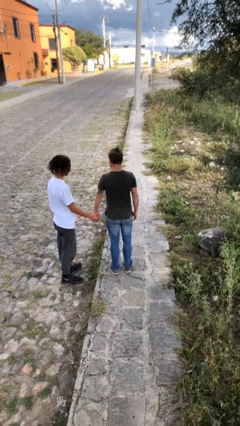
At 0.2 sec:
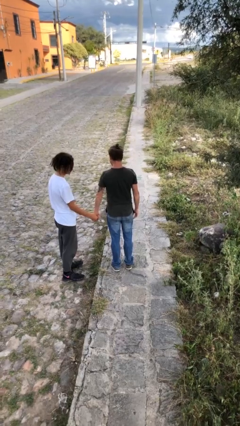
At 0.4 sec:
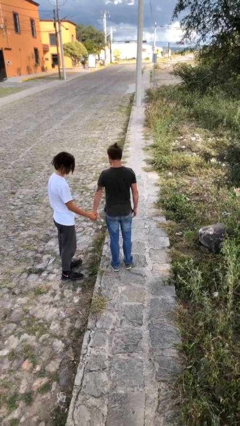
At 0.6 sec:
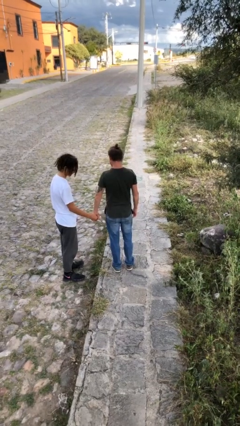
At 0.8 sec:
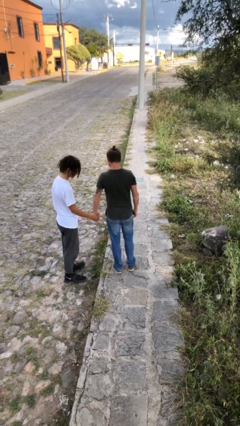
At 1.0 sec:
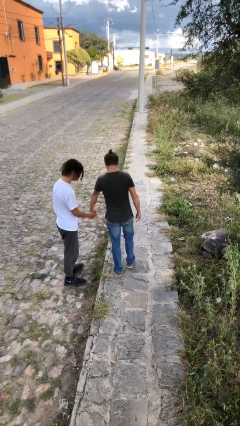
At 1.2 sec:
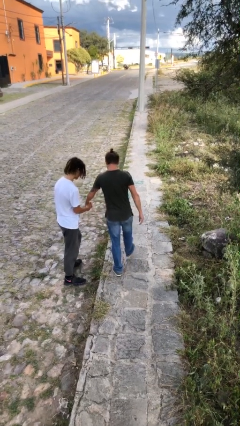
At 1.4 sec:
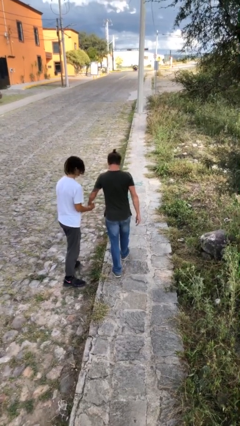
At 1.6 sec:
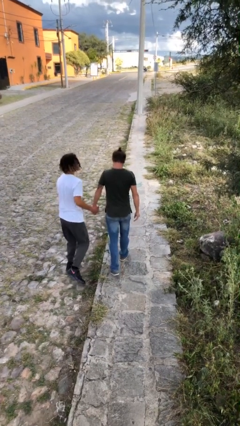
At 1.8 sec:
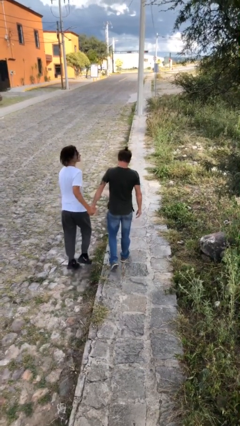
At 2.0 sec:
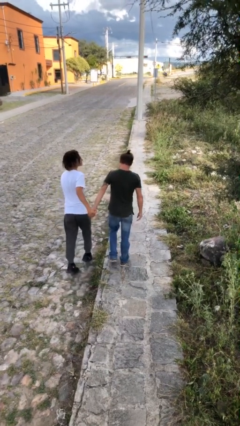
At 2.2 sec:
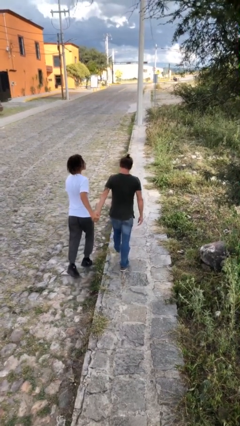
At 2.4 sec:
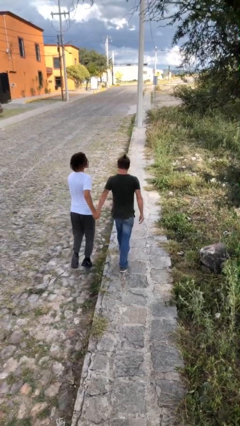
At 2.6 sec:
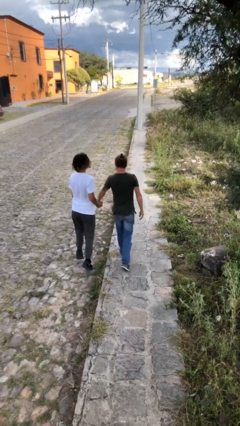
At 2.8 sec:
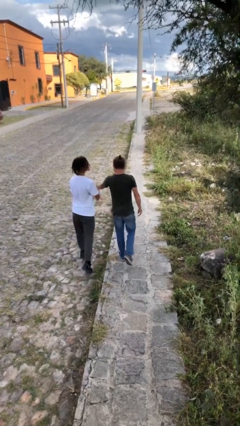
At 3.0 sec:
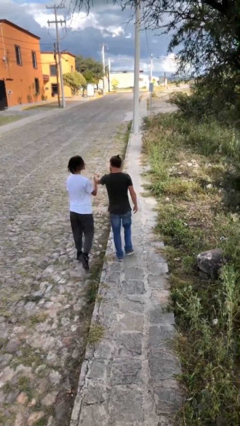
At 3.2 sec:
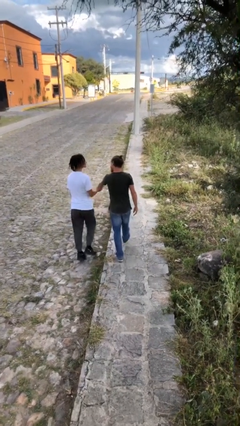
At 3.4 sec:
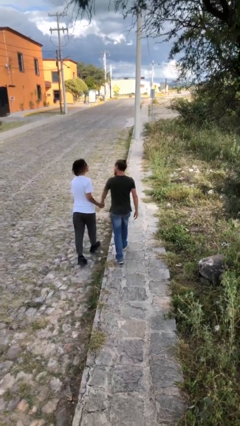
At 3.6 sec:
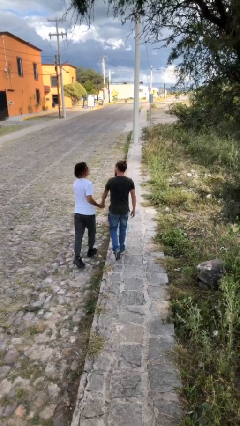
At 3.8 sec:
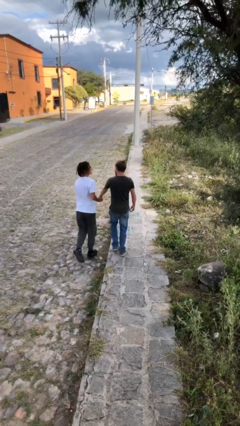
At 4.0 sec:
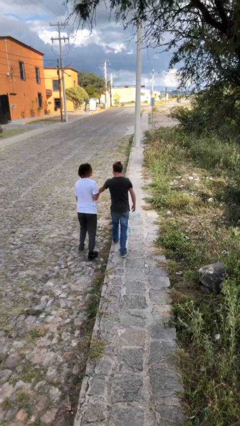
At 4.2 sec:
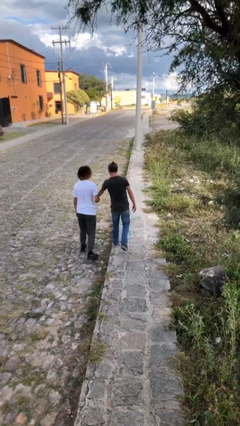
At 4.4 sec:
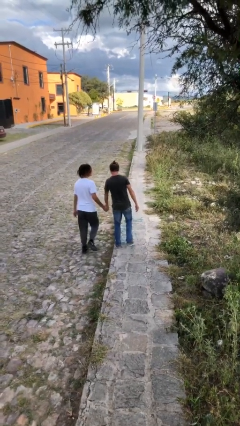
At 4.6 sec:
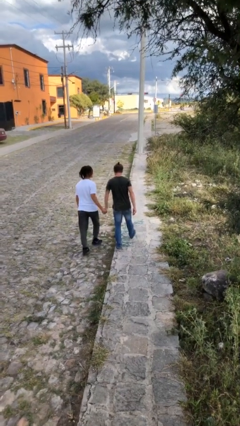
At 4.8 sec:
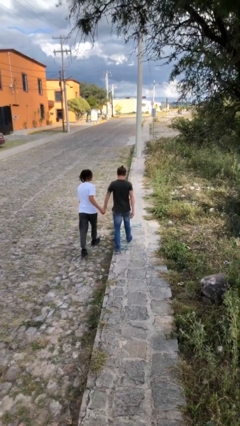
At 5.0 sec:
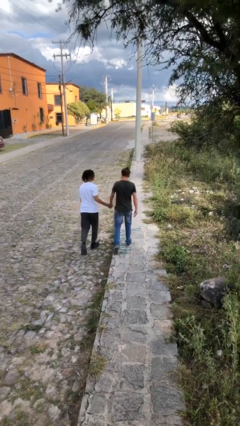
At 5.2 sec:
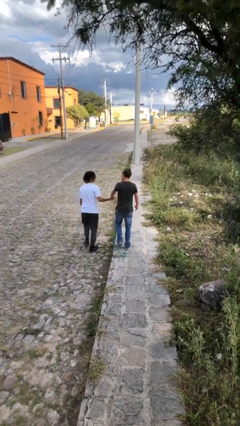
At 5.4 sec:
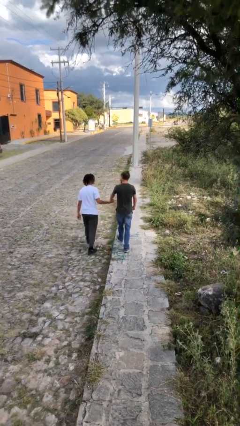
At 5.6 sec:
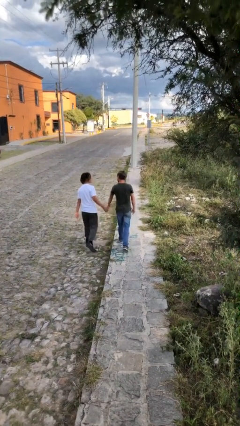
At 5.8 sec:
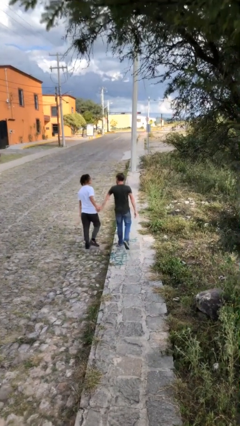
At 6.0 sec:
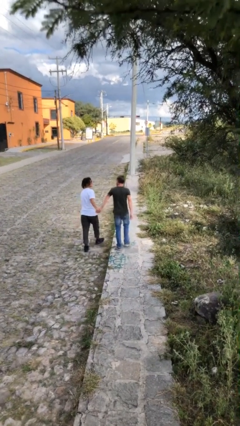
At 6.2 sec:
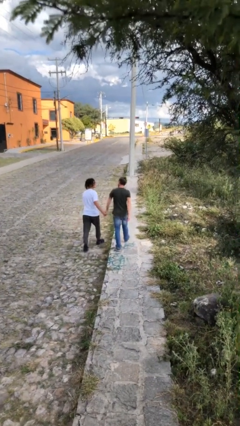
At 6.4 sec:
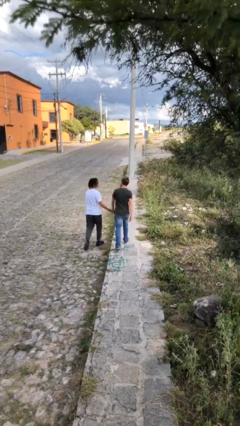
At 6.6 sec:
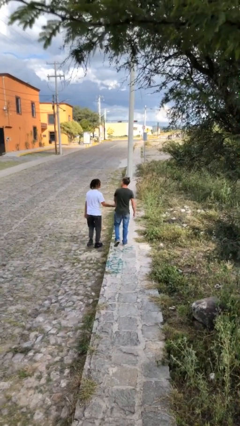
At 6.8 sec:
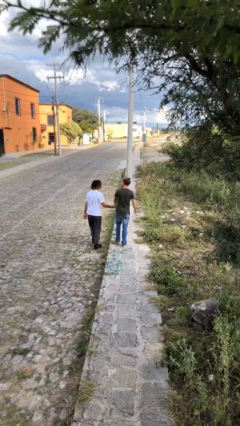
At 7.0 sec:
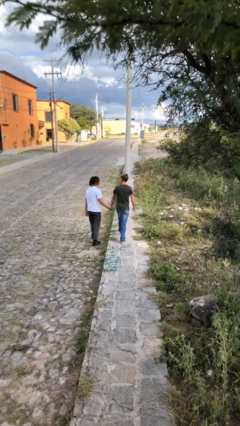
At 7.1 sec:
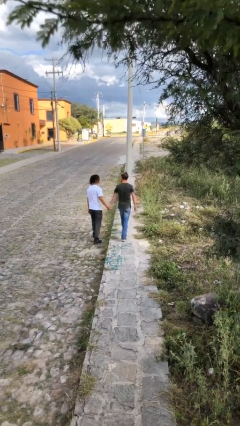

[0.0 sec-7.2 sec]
person holds hand

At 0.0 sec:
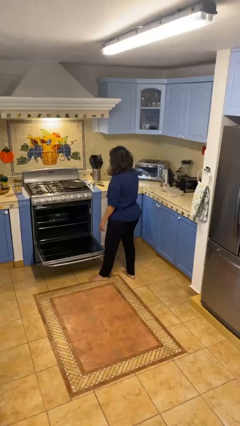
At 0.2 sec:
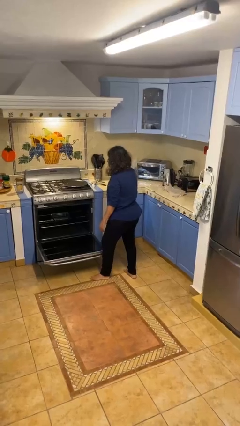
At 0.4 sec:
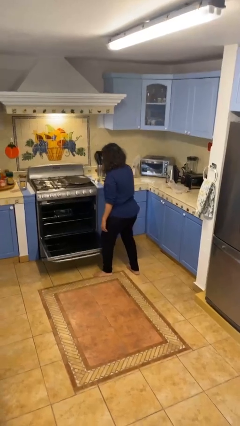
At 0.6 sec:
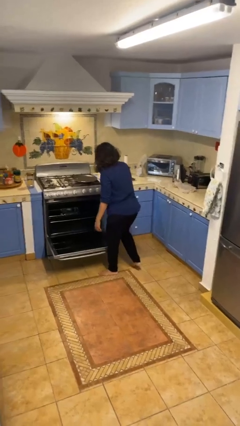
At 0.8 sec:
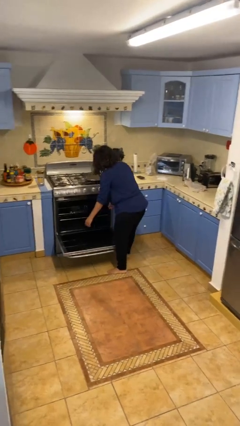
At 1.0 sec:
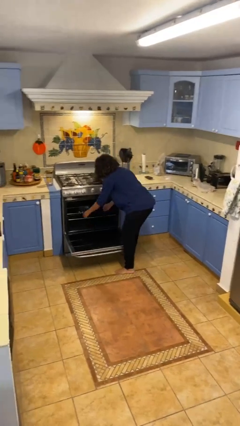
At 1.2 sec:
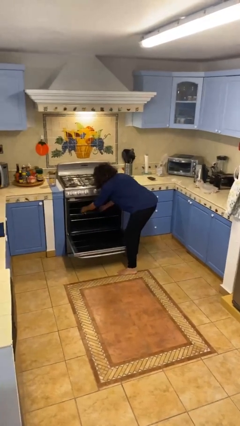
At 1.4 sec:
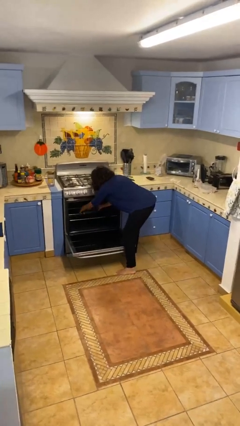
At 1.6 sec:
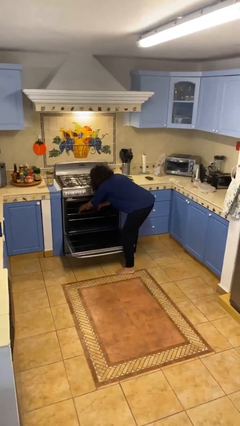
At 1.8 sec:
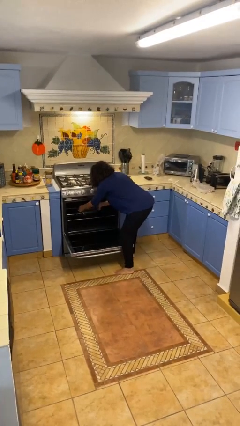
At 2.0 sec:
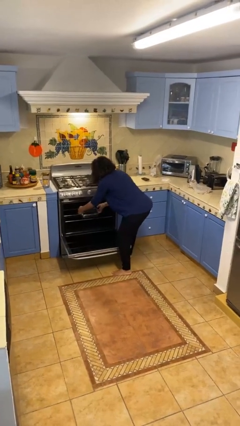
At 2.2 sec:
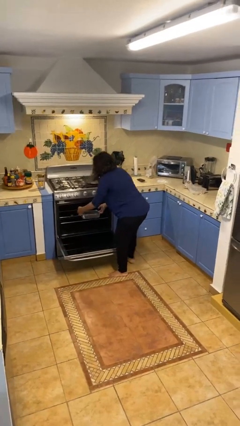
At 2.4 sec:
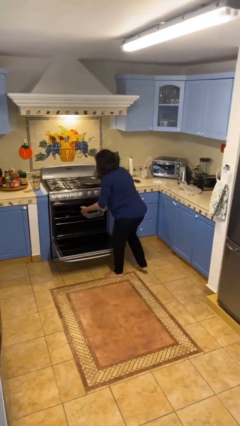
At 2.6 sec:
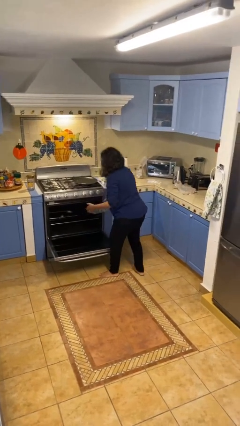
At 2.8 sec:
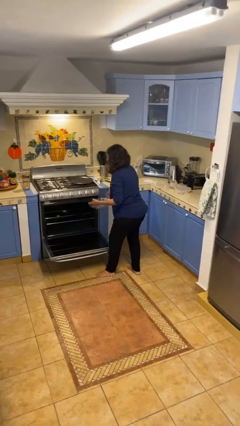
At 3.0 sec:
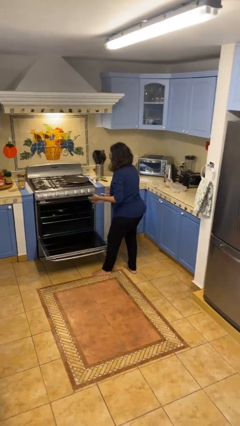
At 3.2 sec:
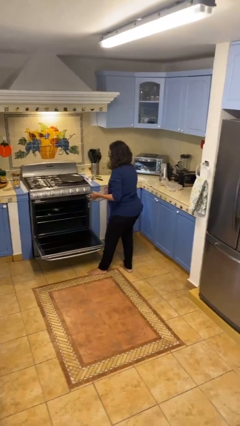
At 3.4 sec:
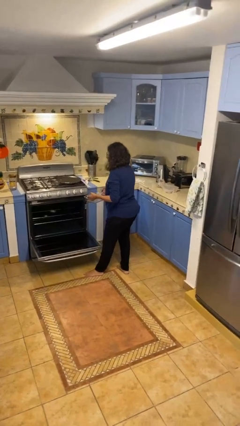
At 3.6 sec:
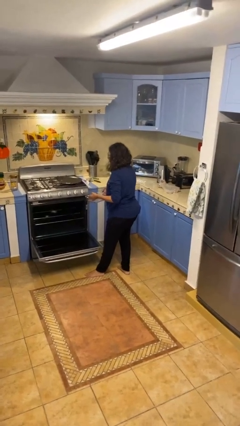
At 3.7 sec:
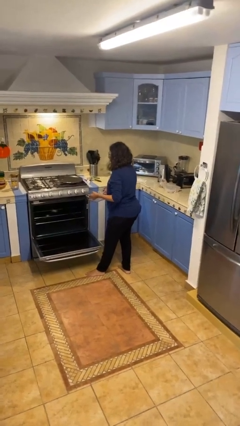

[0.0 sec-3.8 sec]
person takes object from oven

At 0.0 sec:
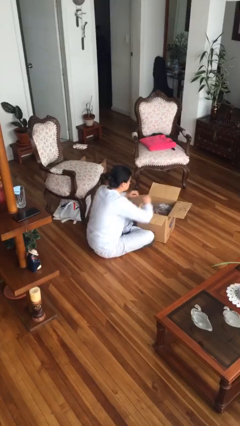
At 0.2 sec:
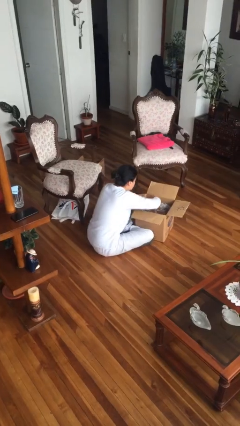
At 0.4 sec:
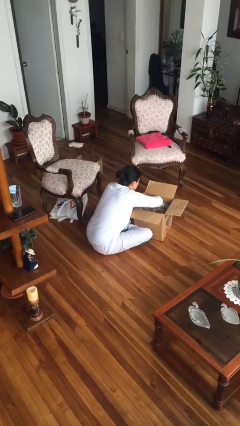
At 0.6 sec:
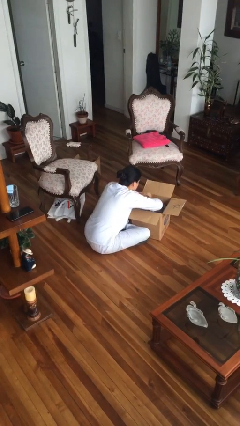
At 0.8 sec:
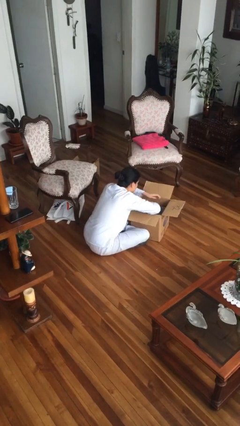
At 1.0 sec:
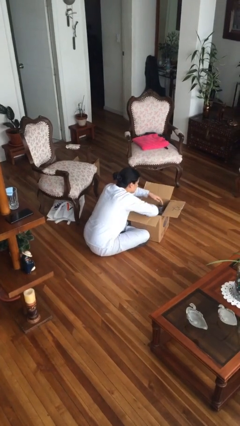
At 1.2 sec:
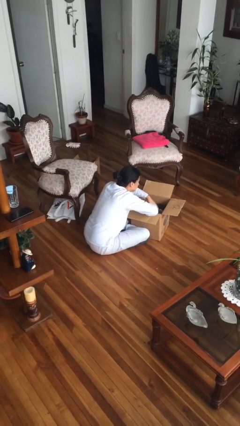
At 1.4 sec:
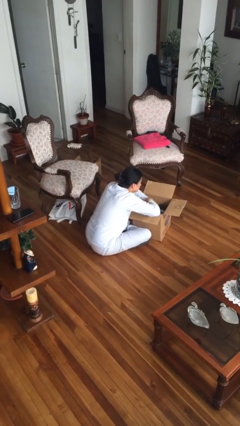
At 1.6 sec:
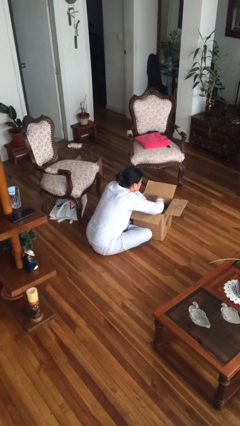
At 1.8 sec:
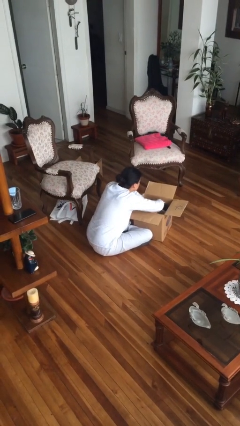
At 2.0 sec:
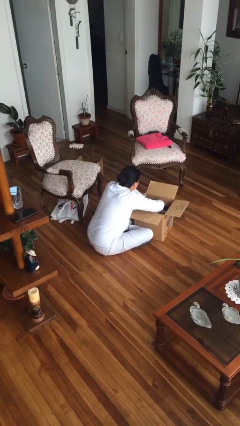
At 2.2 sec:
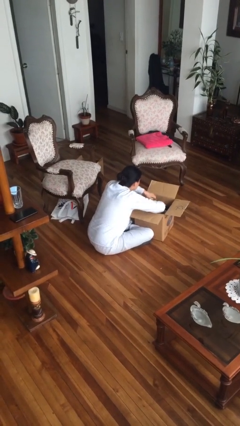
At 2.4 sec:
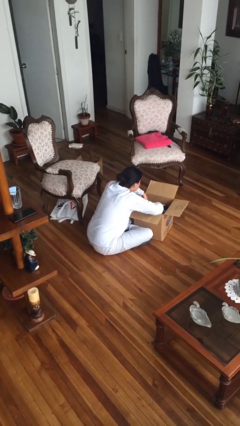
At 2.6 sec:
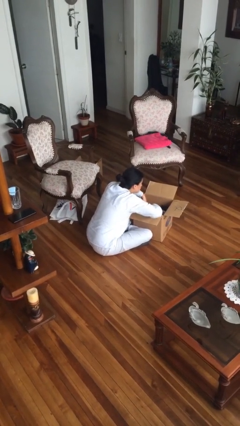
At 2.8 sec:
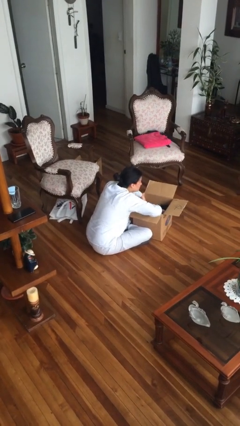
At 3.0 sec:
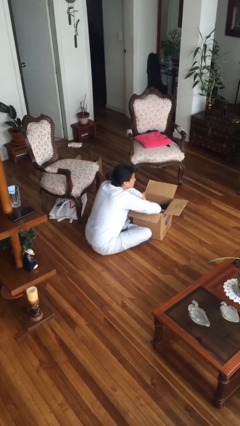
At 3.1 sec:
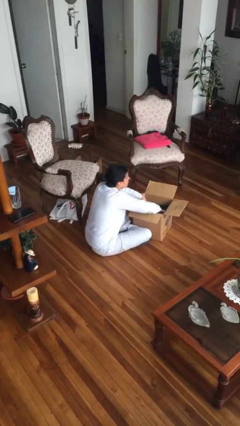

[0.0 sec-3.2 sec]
person searches in box

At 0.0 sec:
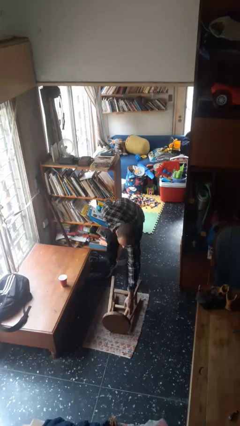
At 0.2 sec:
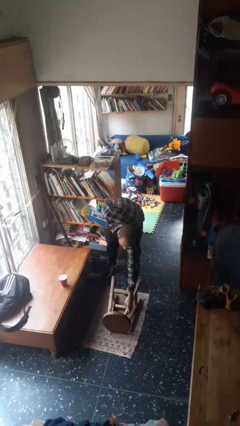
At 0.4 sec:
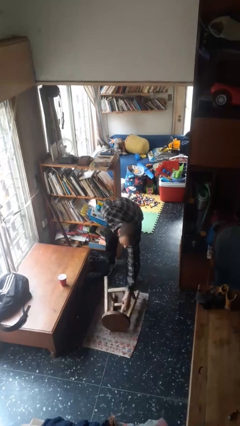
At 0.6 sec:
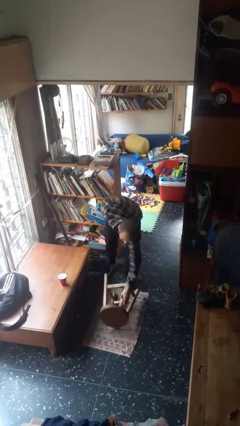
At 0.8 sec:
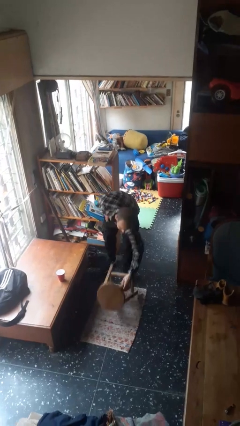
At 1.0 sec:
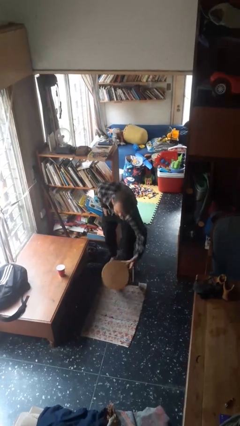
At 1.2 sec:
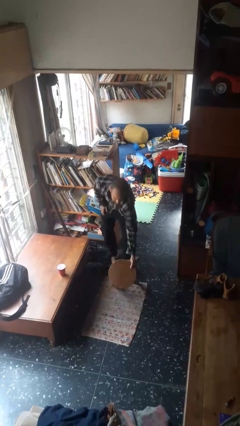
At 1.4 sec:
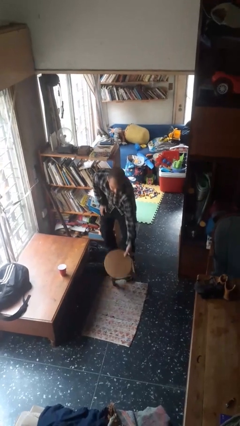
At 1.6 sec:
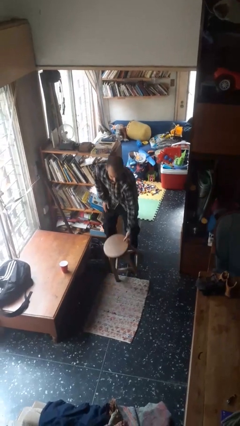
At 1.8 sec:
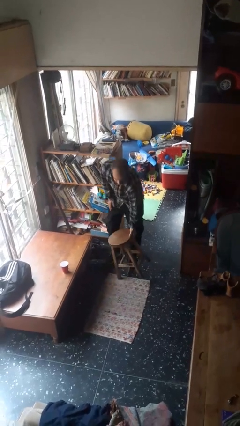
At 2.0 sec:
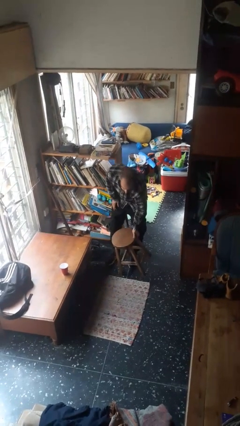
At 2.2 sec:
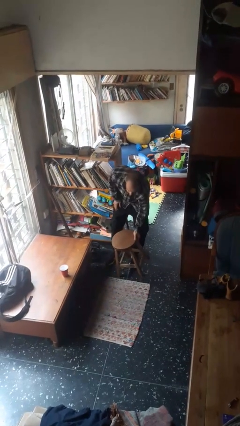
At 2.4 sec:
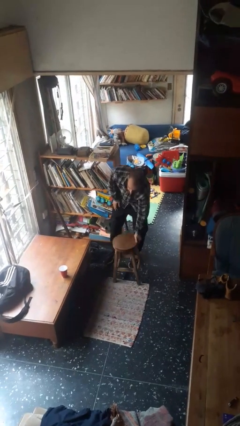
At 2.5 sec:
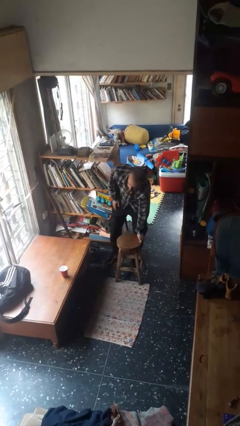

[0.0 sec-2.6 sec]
person sets upright furniture

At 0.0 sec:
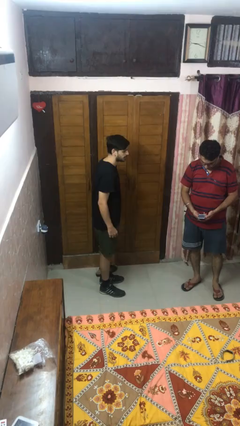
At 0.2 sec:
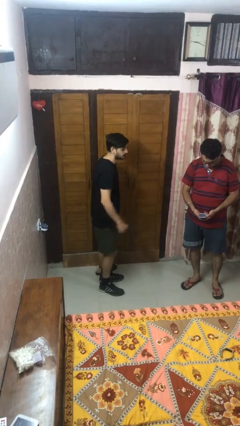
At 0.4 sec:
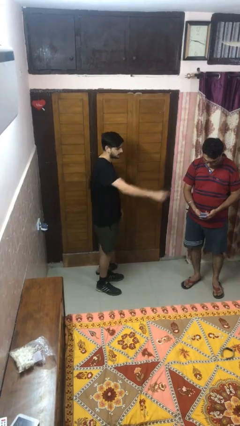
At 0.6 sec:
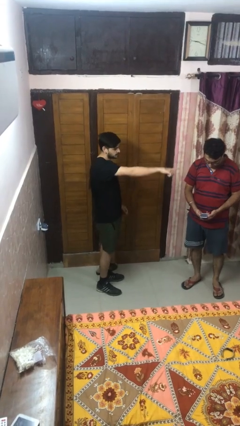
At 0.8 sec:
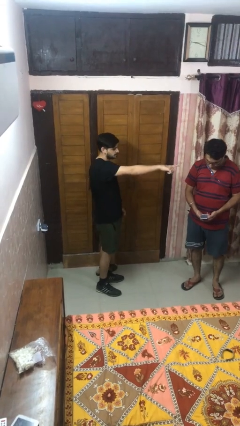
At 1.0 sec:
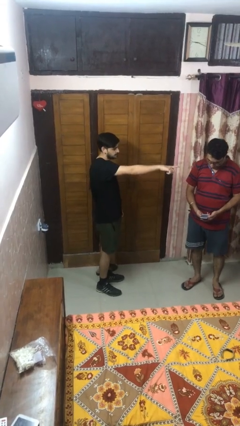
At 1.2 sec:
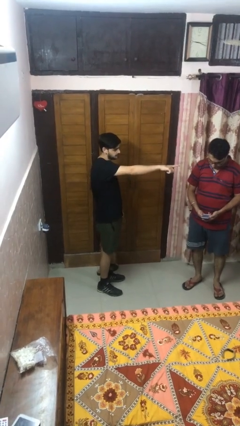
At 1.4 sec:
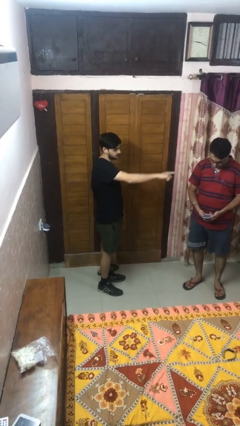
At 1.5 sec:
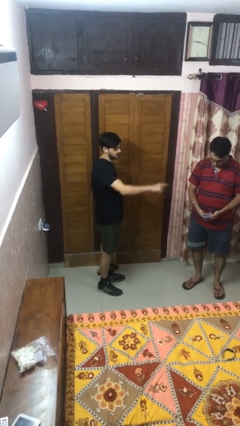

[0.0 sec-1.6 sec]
person points at person
